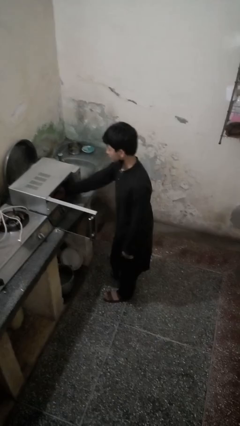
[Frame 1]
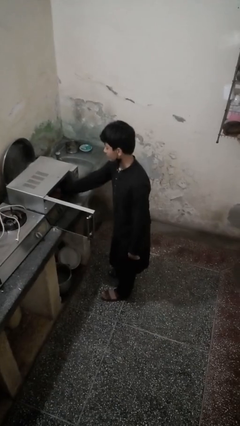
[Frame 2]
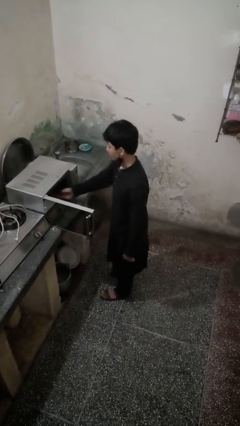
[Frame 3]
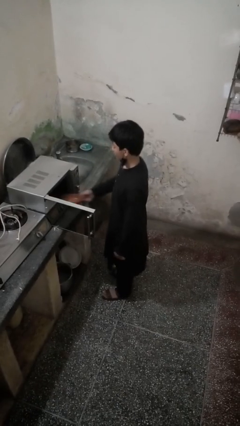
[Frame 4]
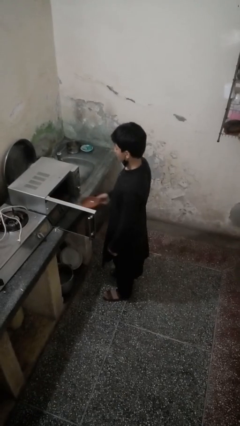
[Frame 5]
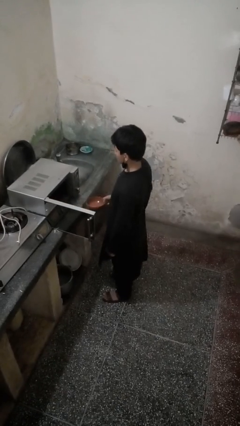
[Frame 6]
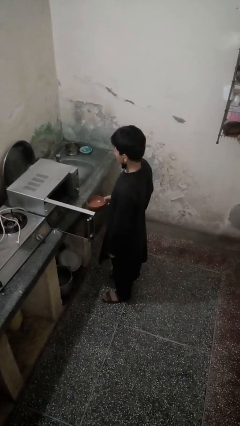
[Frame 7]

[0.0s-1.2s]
person takes object from microwave

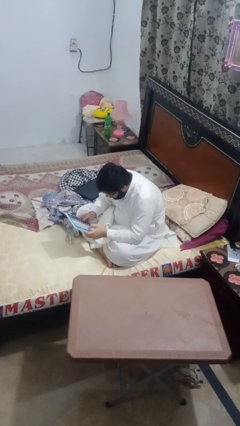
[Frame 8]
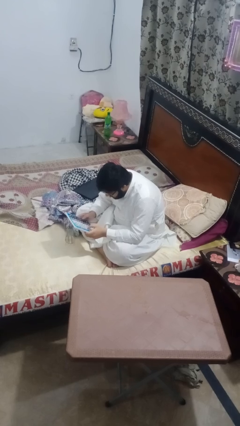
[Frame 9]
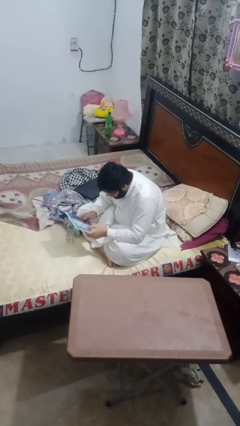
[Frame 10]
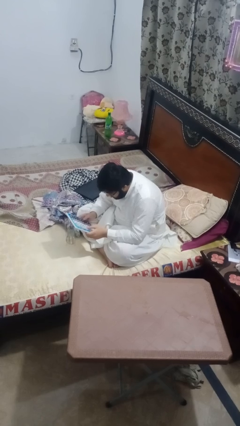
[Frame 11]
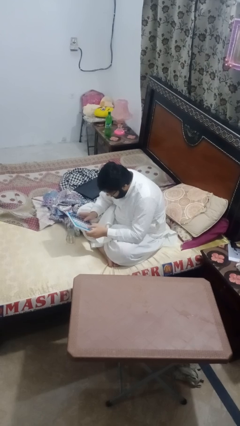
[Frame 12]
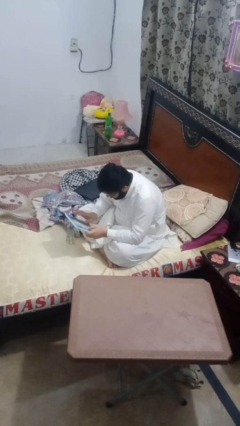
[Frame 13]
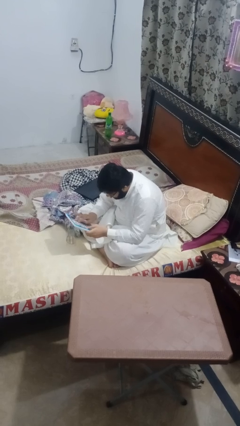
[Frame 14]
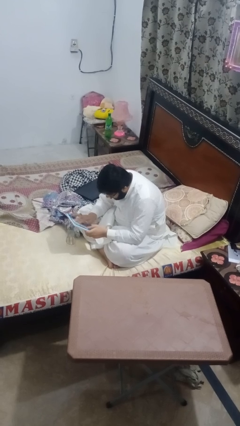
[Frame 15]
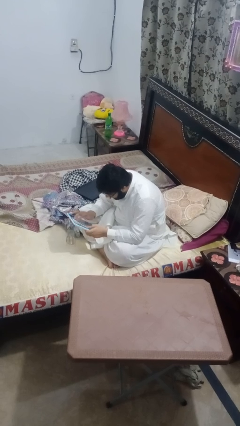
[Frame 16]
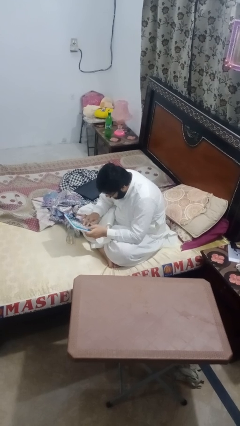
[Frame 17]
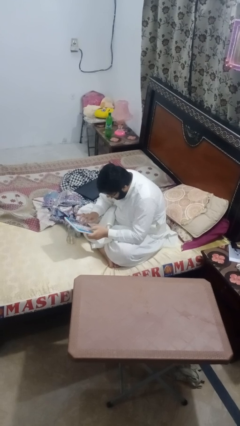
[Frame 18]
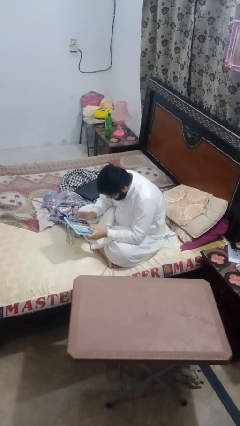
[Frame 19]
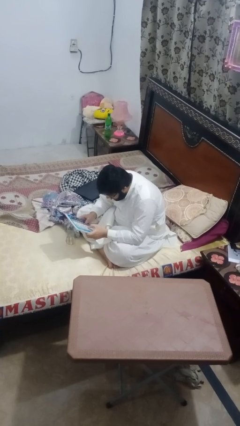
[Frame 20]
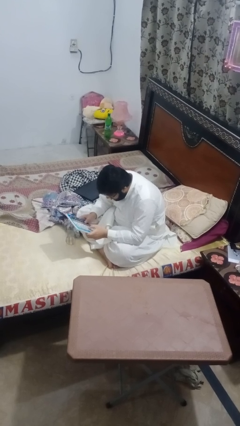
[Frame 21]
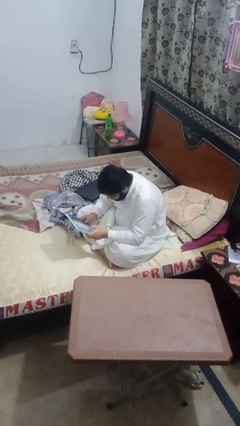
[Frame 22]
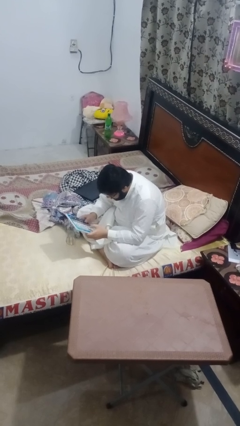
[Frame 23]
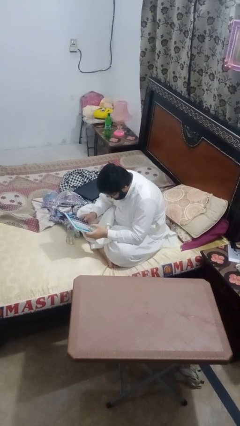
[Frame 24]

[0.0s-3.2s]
person interacts with tablet

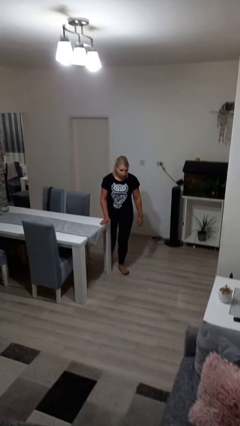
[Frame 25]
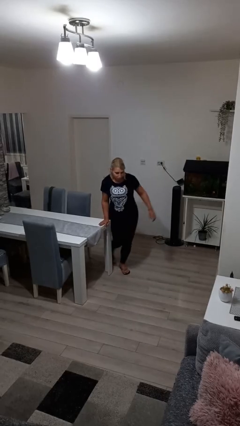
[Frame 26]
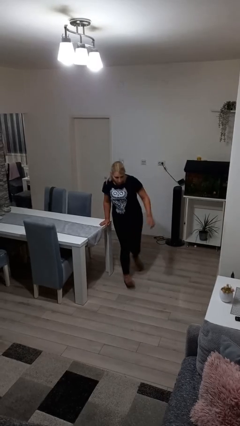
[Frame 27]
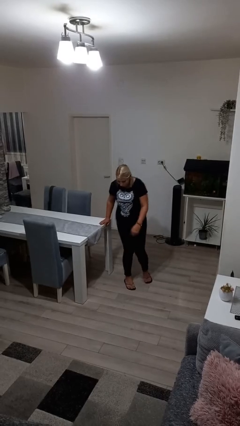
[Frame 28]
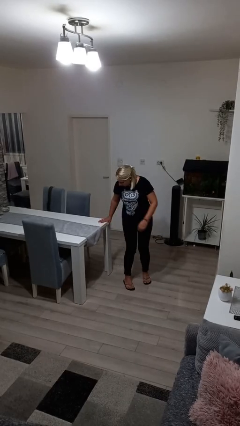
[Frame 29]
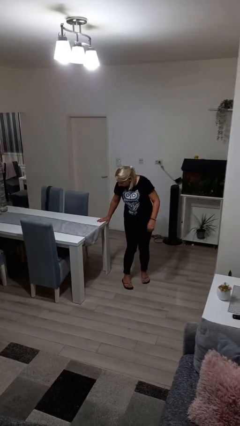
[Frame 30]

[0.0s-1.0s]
person bumps into table

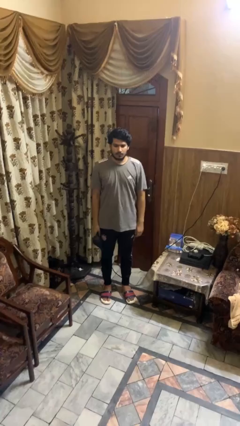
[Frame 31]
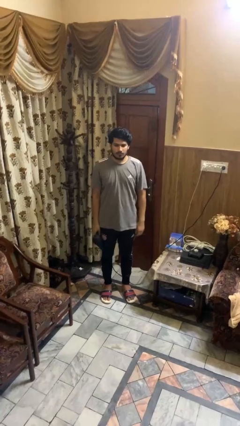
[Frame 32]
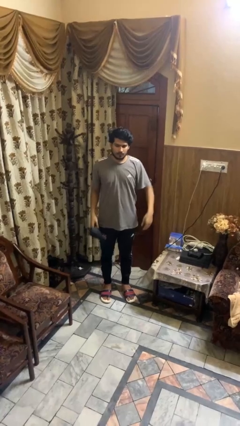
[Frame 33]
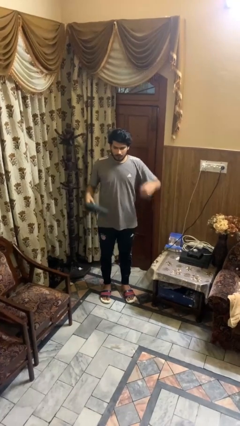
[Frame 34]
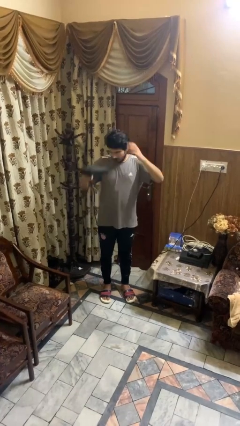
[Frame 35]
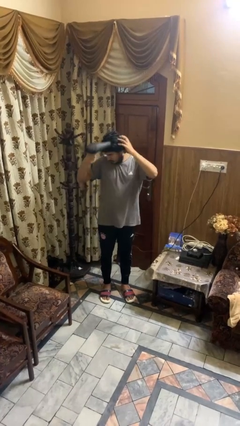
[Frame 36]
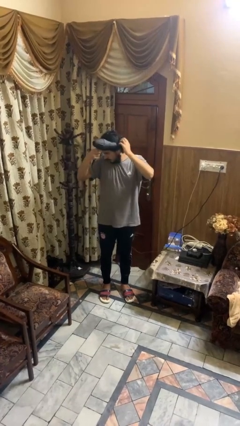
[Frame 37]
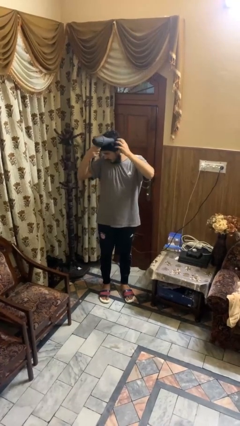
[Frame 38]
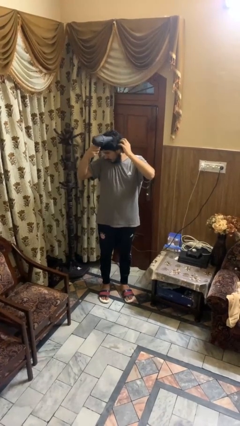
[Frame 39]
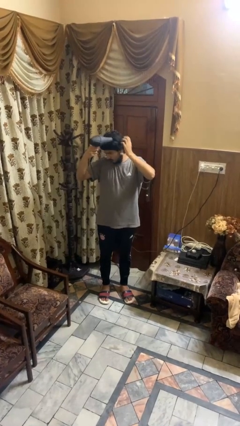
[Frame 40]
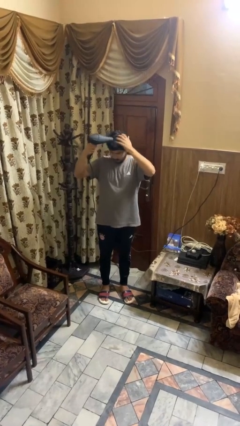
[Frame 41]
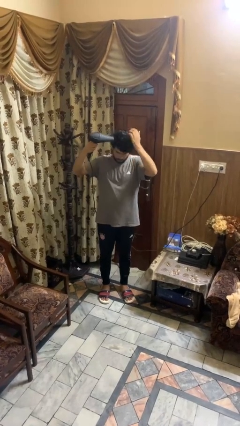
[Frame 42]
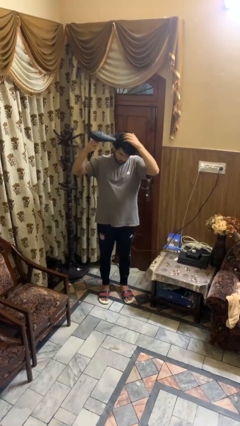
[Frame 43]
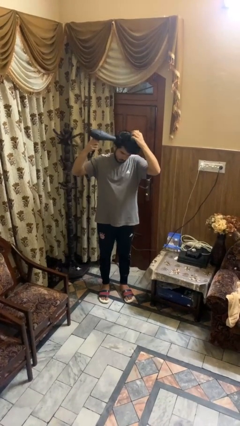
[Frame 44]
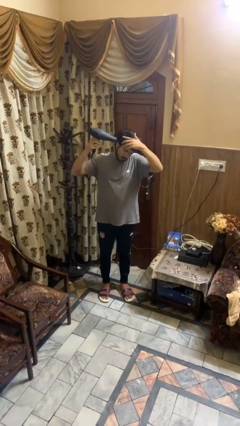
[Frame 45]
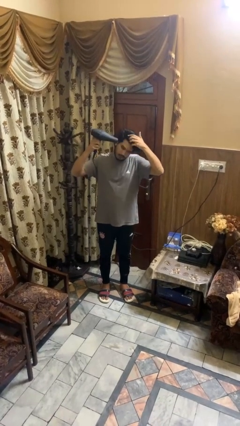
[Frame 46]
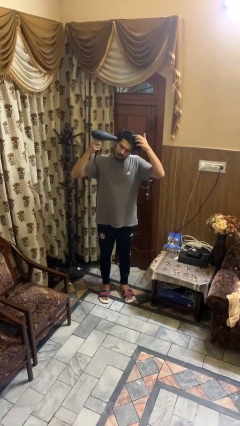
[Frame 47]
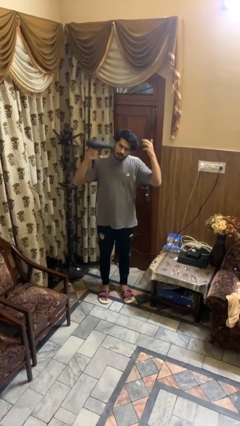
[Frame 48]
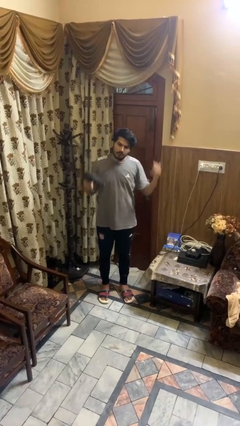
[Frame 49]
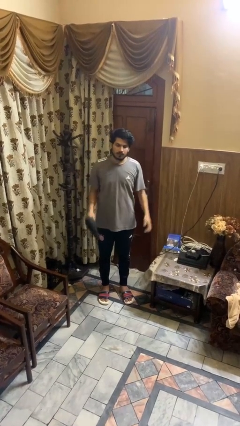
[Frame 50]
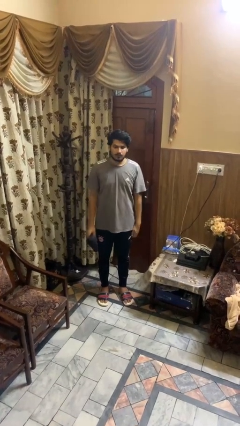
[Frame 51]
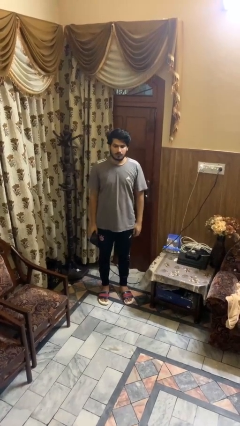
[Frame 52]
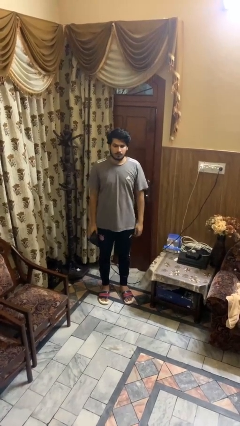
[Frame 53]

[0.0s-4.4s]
person dries hair with hairdryer

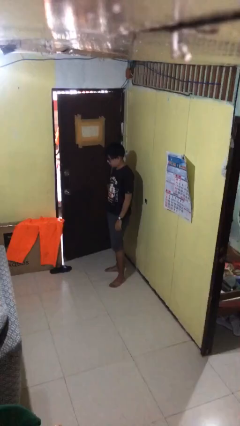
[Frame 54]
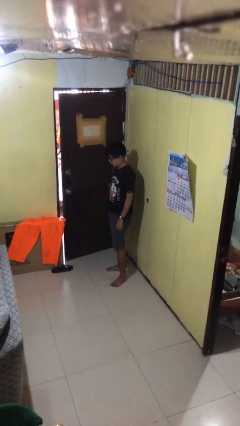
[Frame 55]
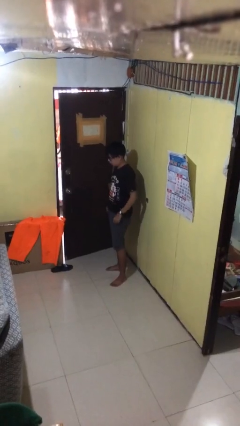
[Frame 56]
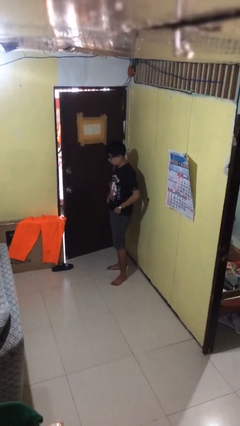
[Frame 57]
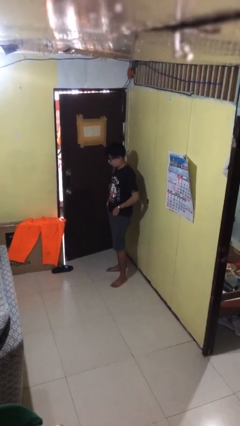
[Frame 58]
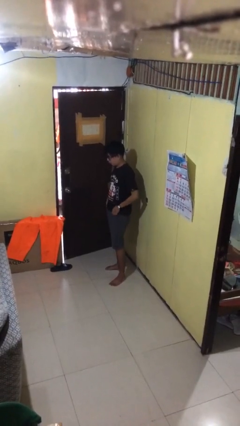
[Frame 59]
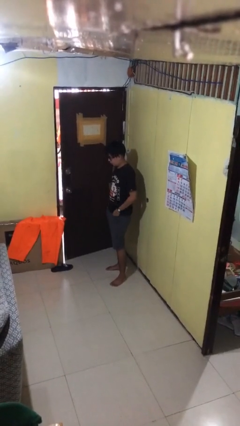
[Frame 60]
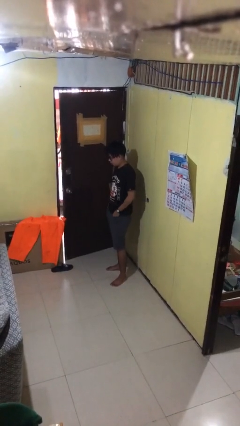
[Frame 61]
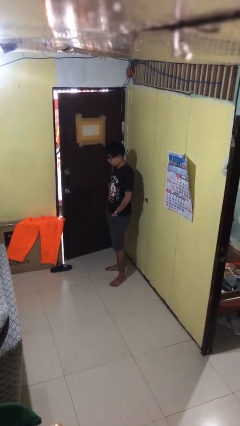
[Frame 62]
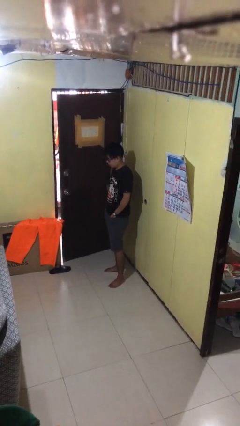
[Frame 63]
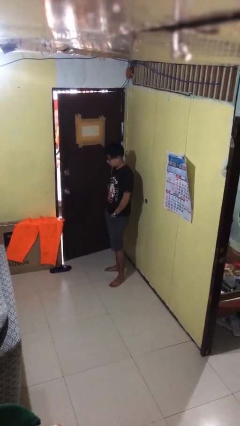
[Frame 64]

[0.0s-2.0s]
person puts hands in back pockets

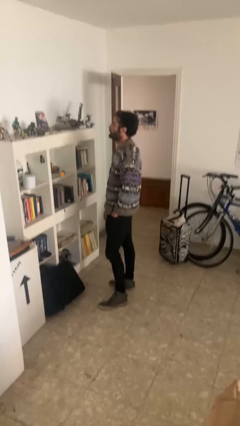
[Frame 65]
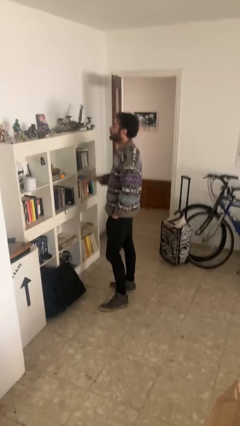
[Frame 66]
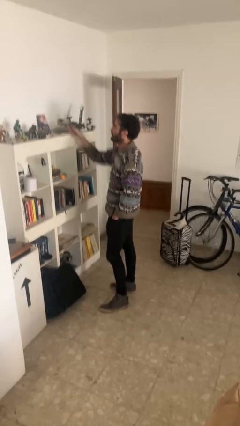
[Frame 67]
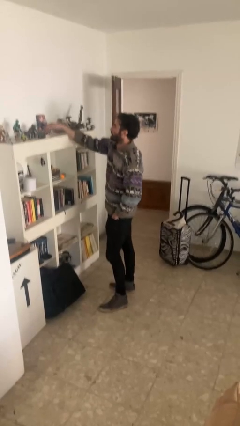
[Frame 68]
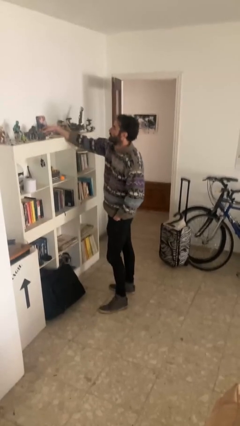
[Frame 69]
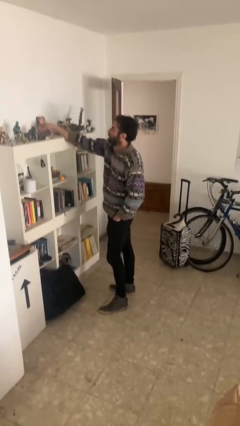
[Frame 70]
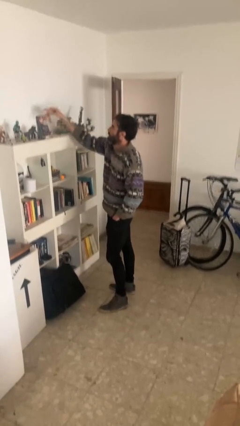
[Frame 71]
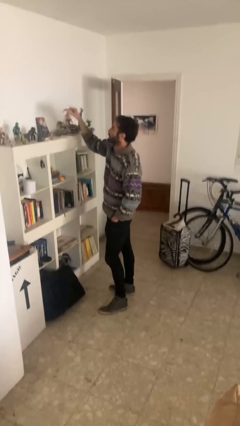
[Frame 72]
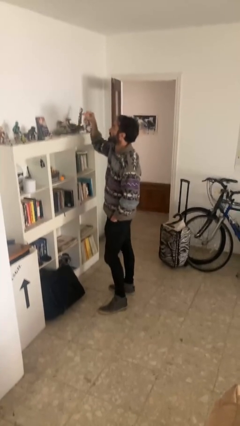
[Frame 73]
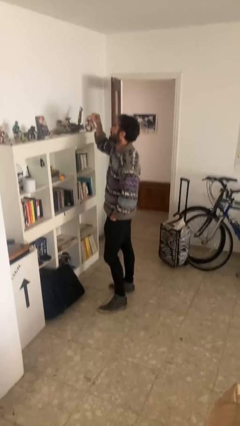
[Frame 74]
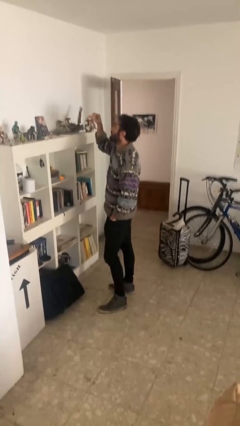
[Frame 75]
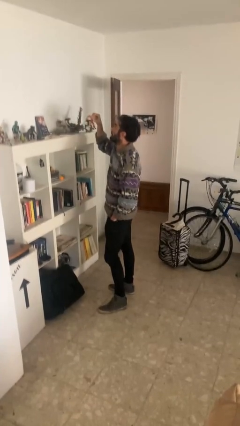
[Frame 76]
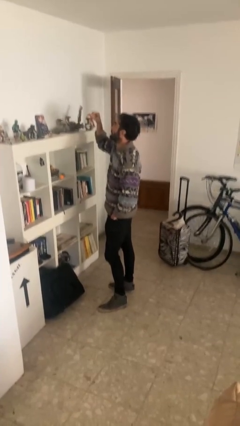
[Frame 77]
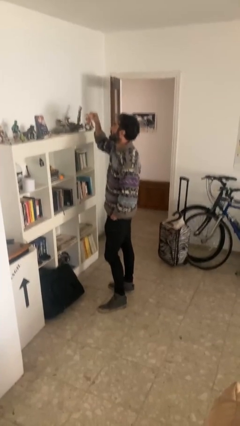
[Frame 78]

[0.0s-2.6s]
person picks up object from shelf

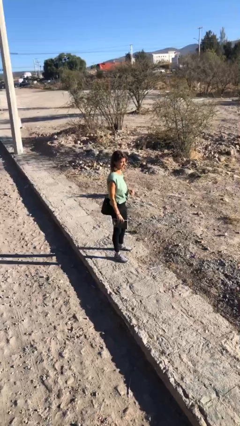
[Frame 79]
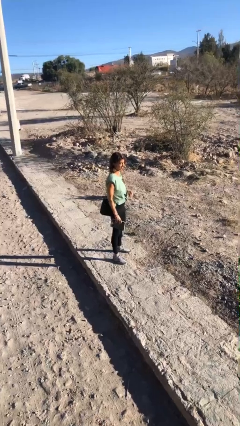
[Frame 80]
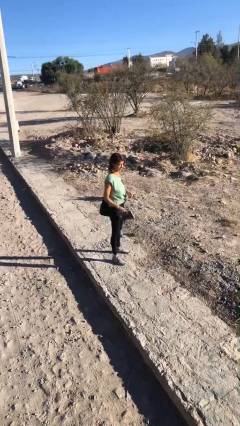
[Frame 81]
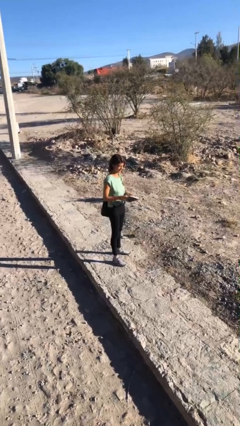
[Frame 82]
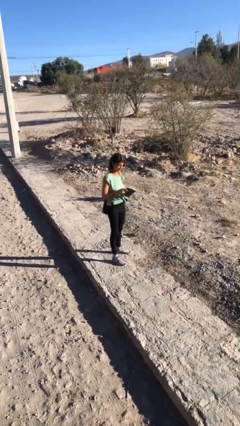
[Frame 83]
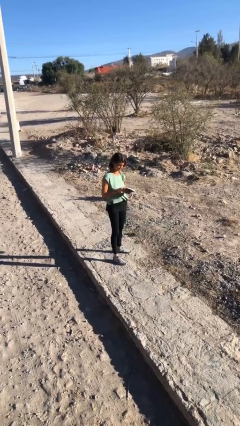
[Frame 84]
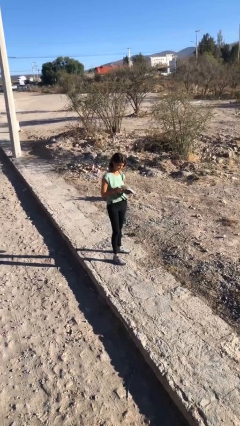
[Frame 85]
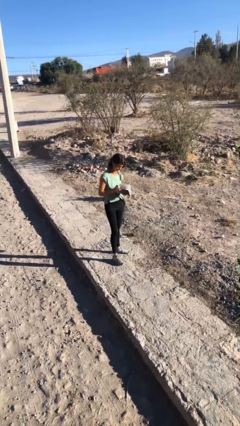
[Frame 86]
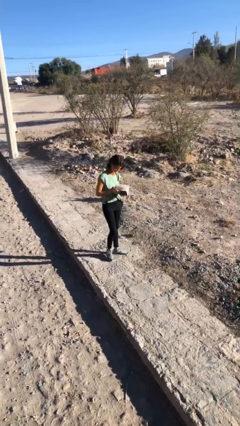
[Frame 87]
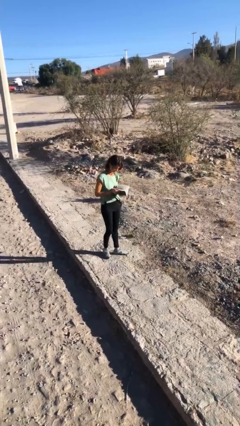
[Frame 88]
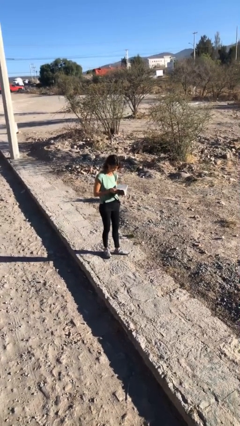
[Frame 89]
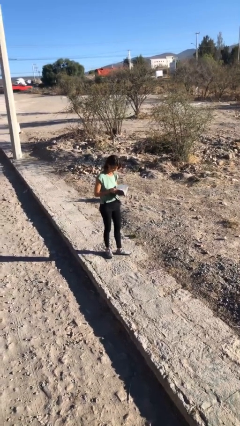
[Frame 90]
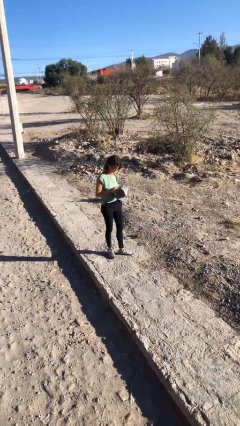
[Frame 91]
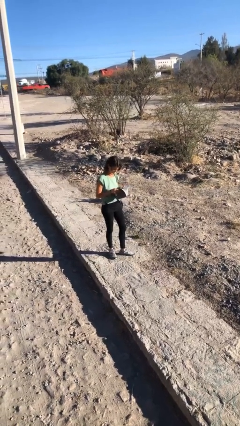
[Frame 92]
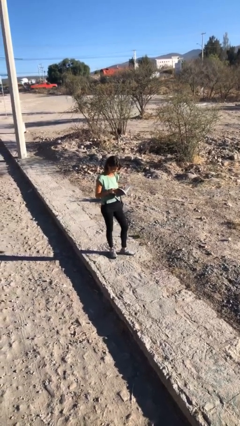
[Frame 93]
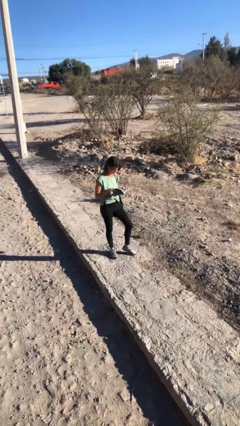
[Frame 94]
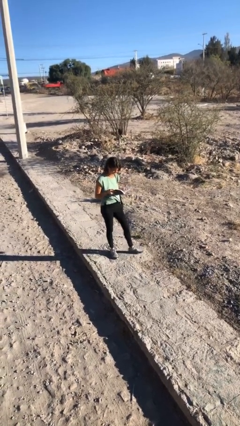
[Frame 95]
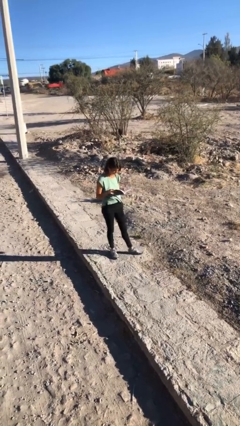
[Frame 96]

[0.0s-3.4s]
person reads document
